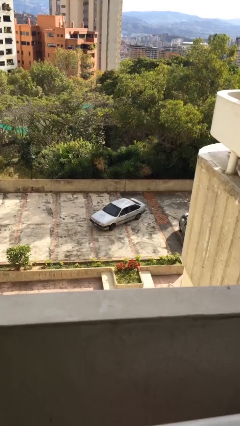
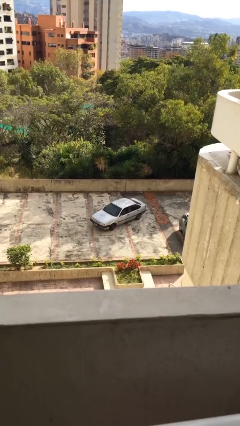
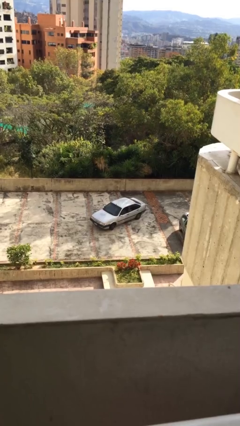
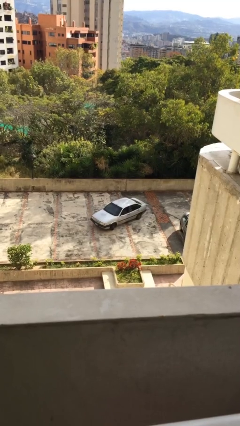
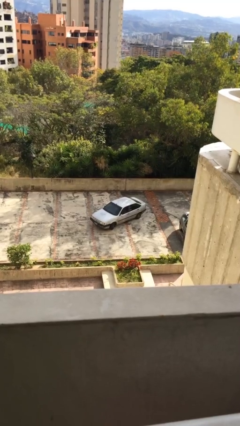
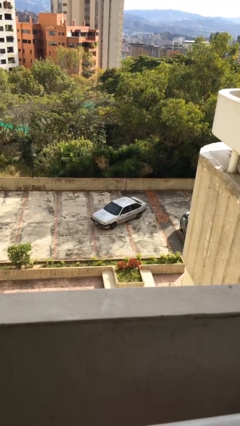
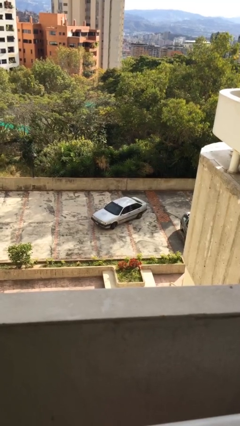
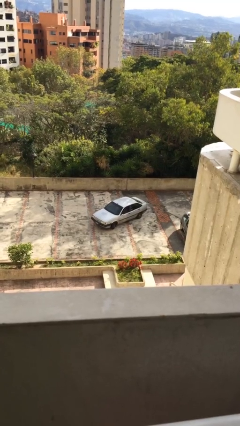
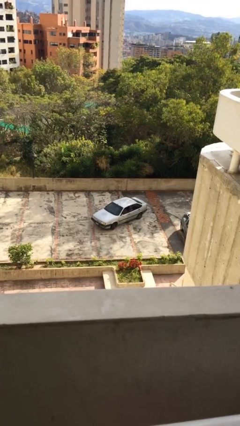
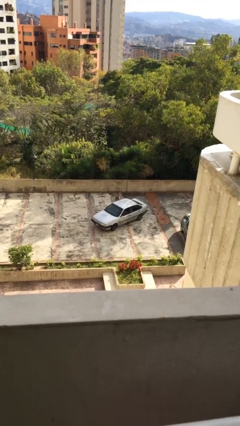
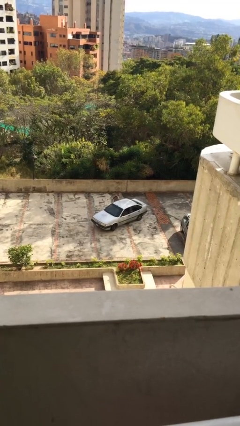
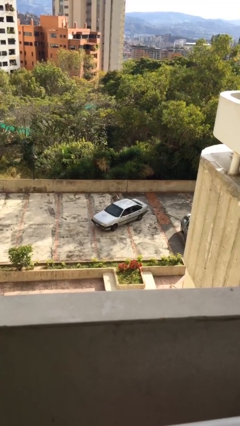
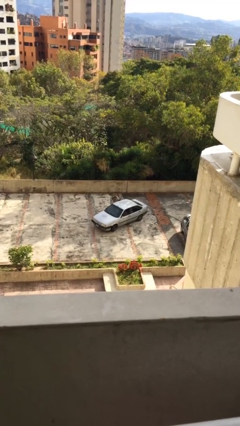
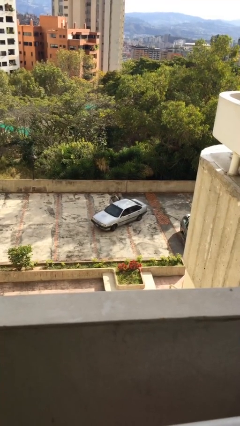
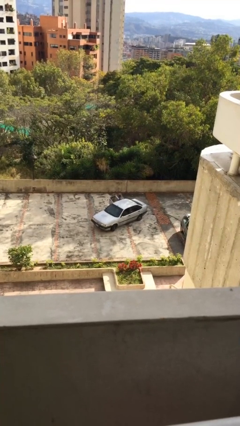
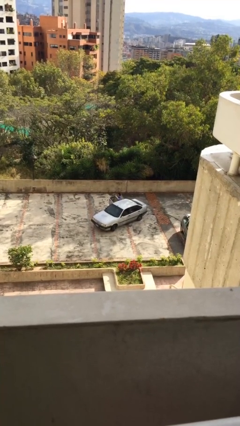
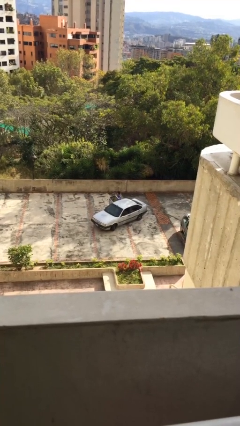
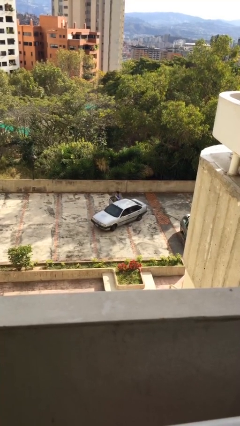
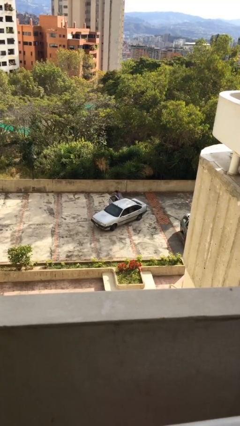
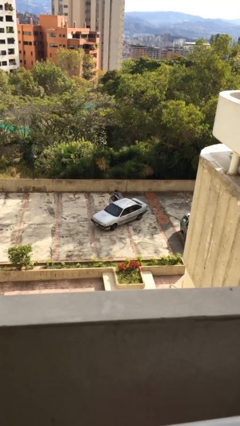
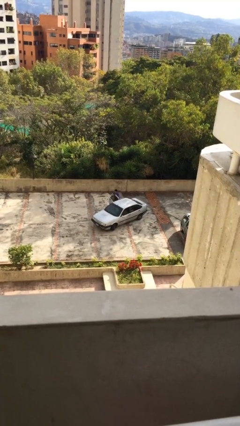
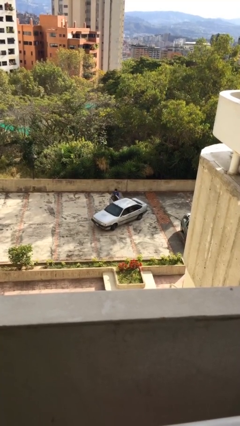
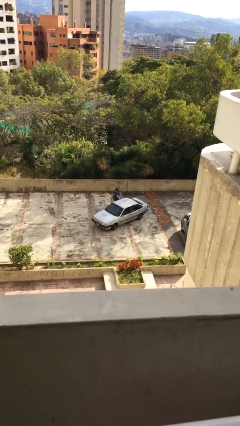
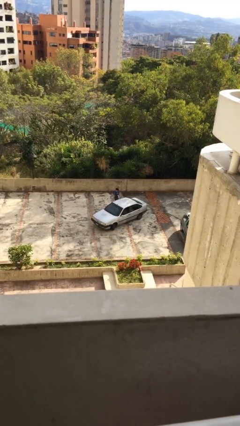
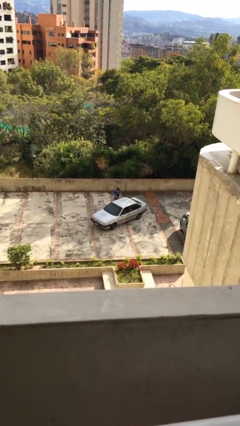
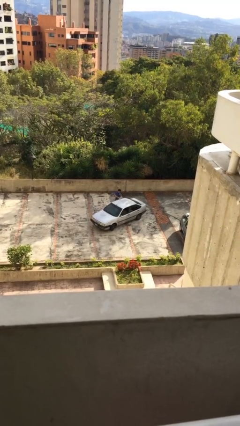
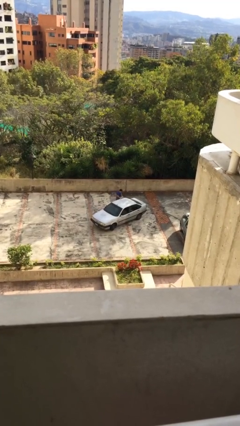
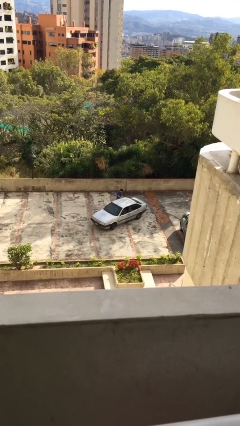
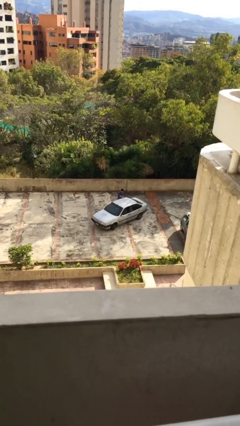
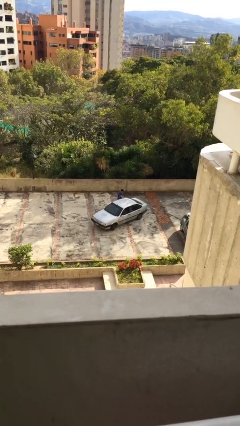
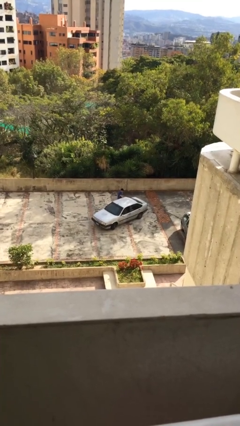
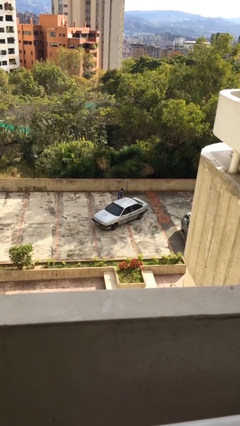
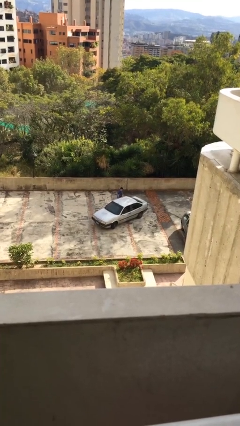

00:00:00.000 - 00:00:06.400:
car drops off person

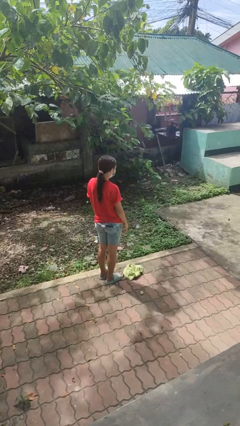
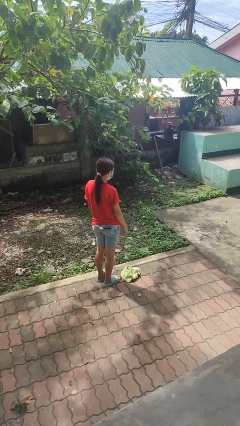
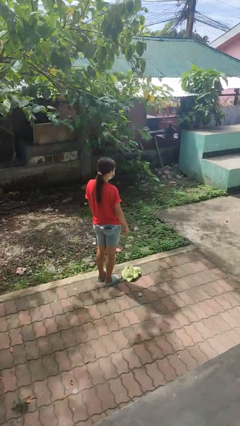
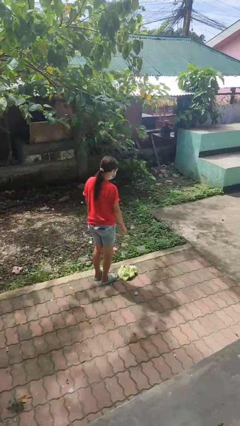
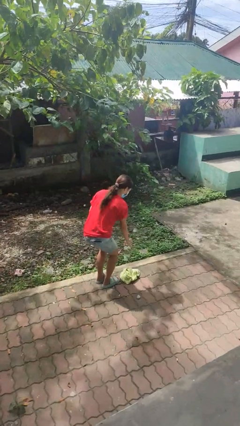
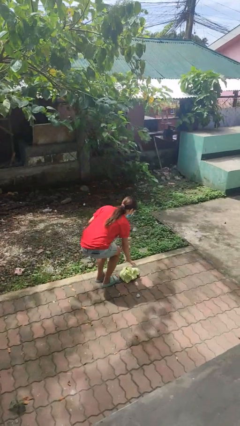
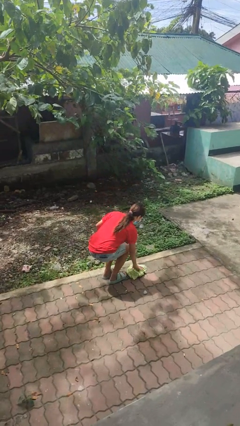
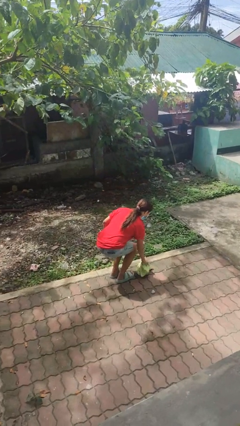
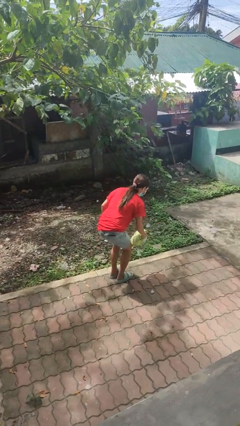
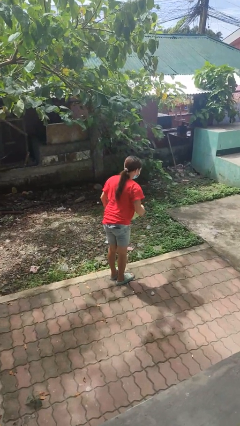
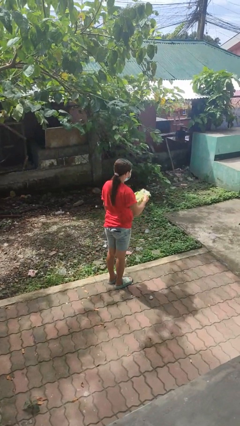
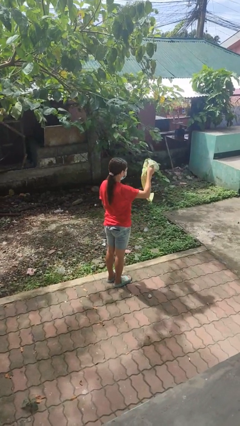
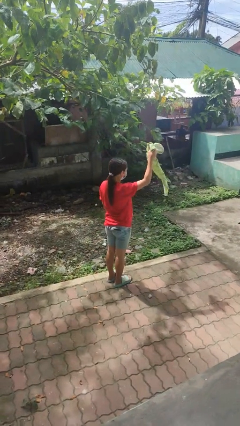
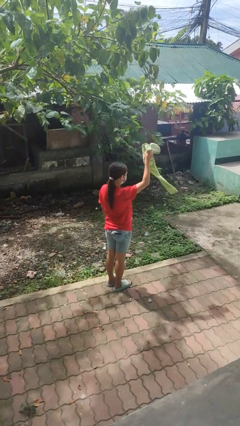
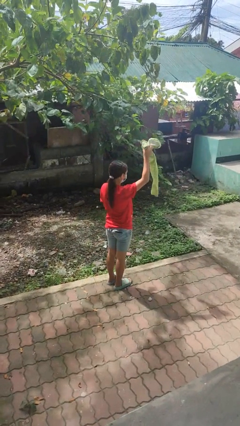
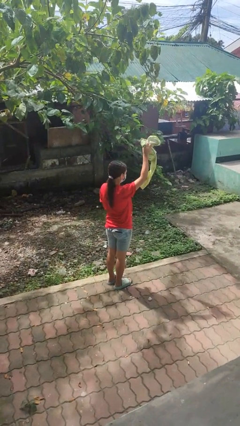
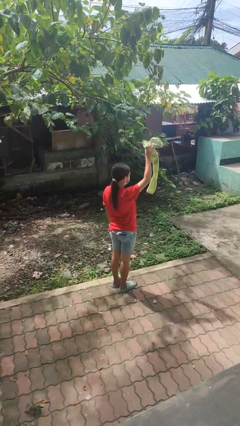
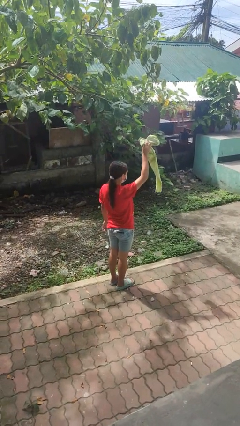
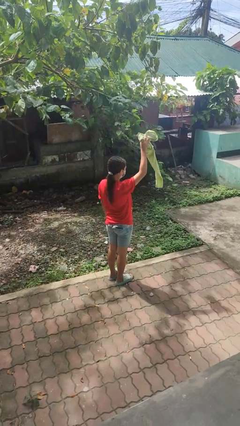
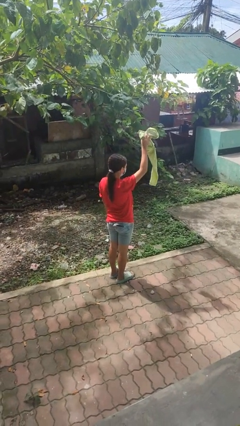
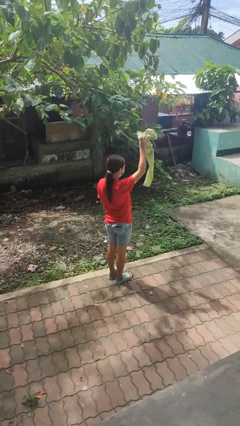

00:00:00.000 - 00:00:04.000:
person picks up object from floor

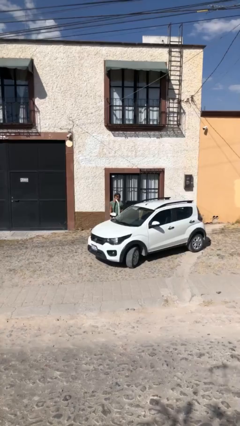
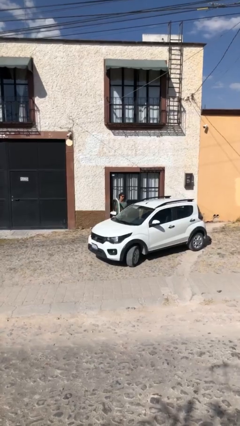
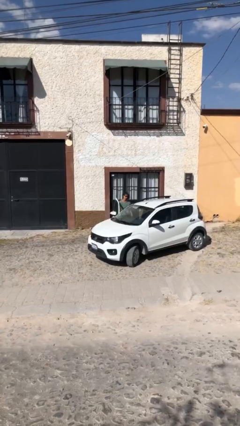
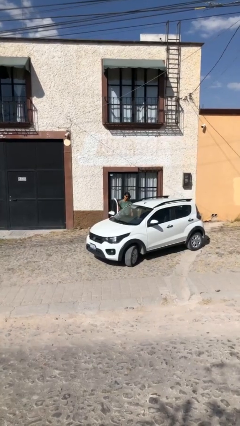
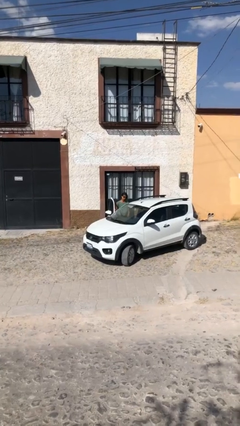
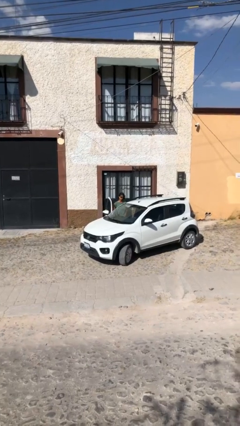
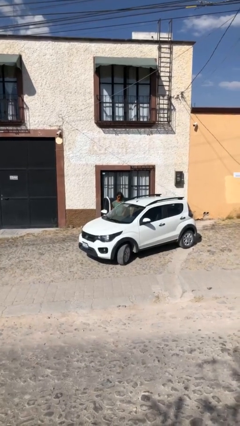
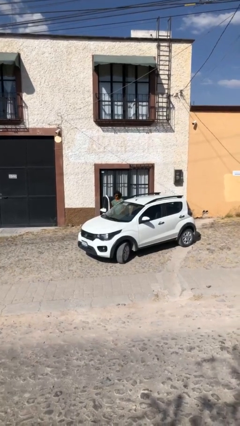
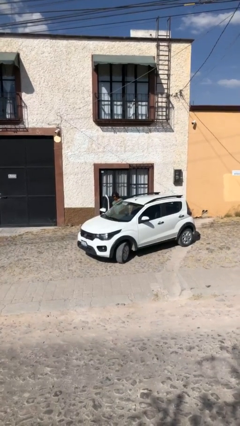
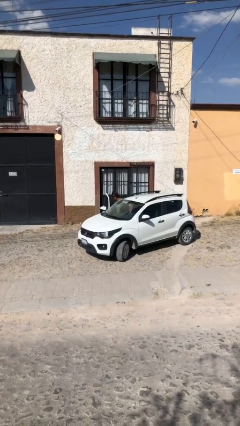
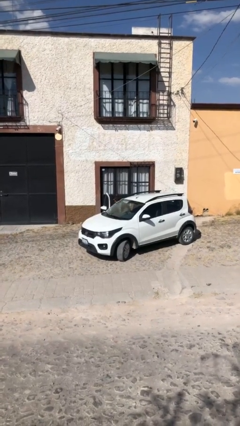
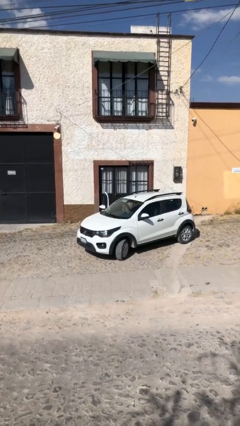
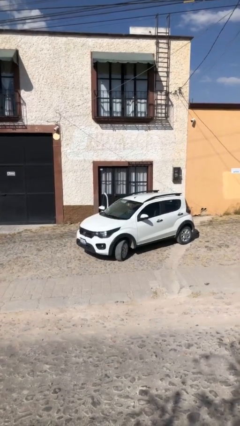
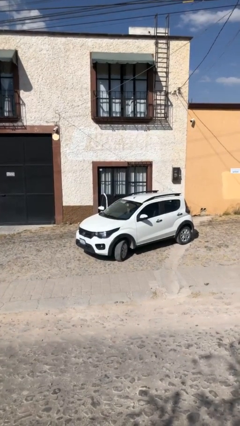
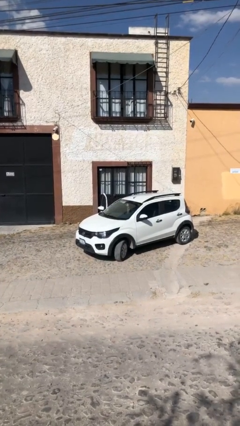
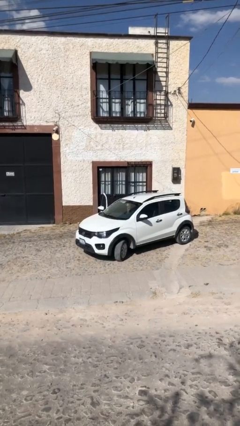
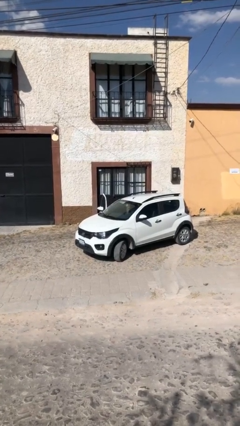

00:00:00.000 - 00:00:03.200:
person enters car

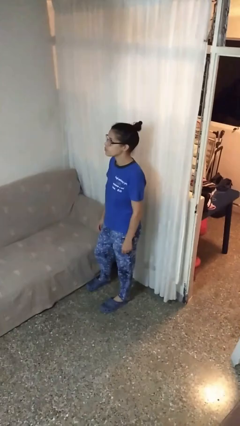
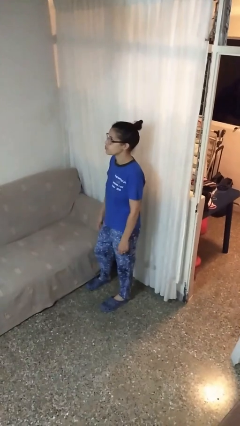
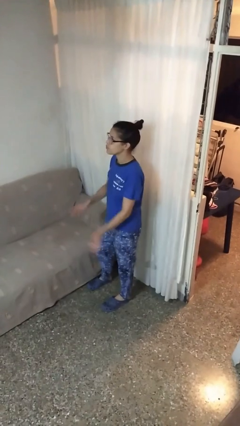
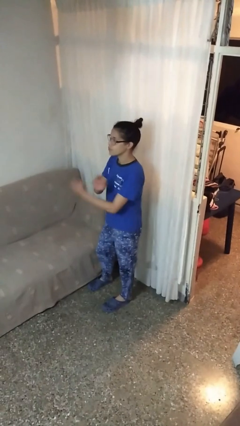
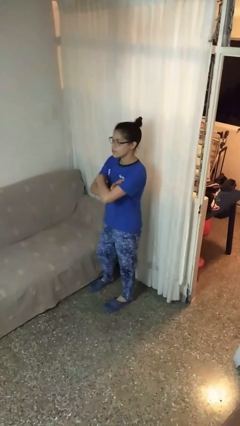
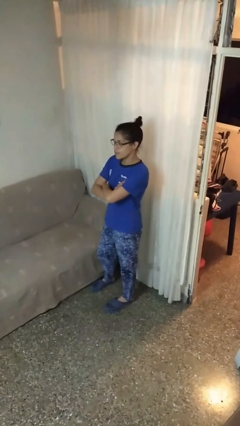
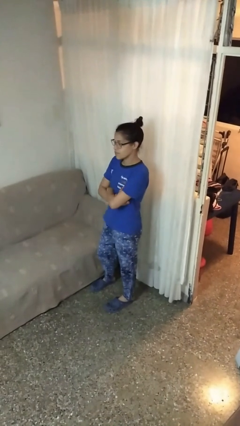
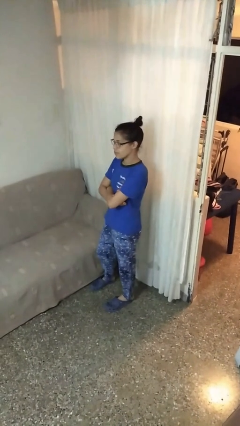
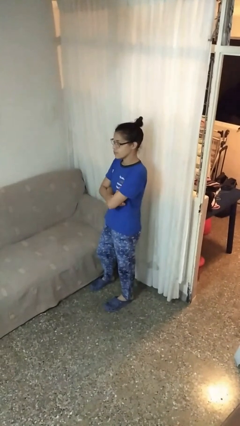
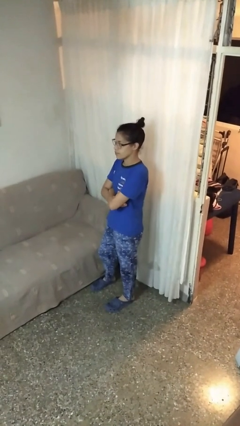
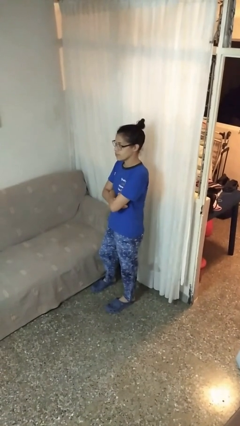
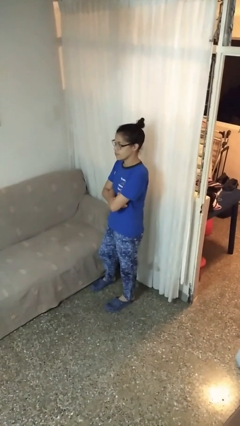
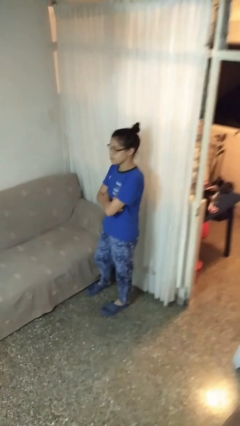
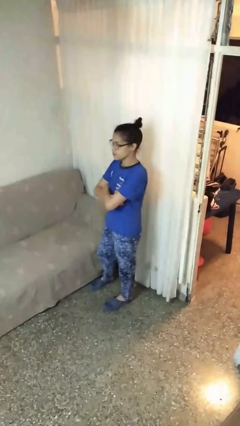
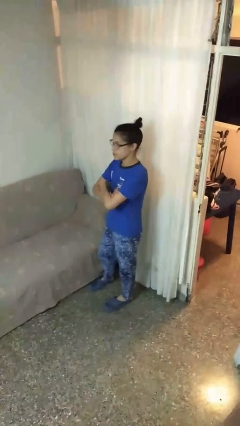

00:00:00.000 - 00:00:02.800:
person crosses arms

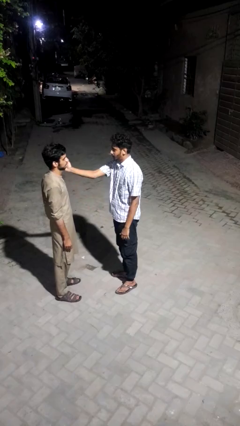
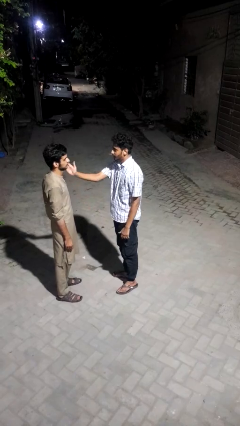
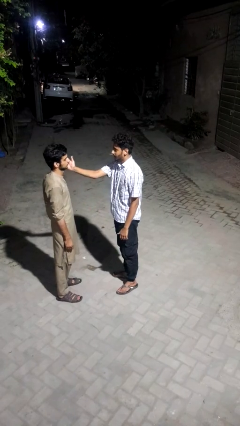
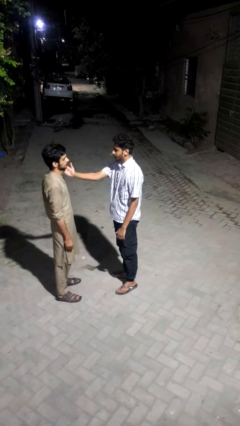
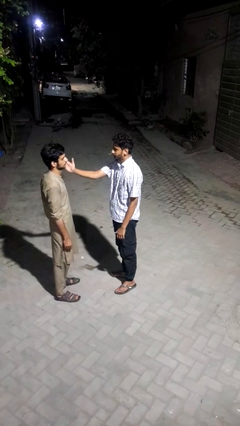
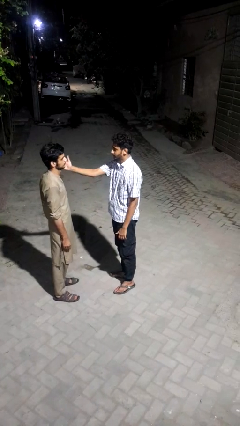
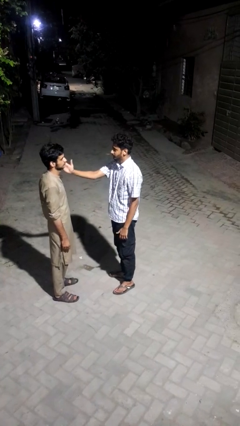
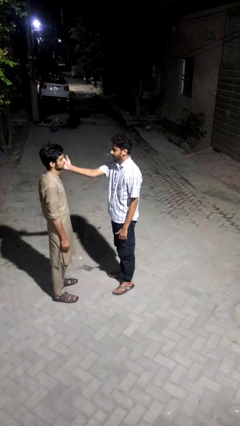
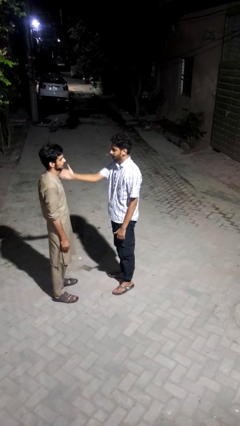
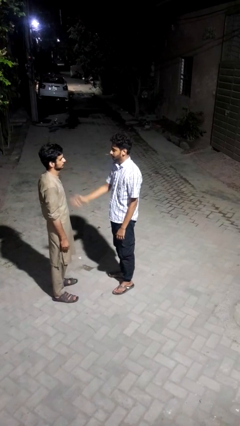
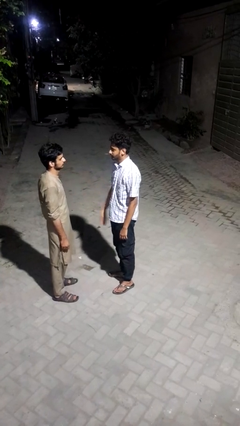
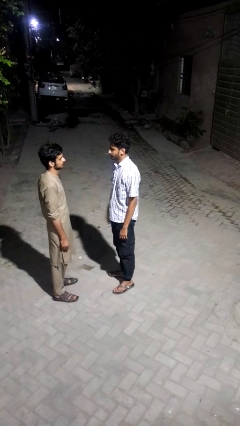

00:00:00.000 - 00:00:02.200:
person touches face of person
